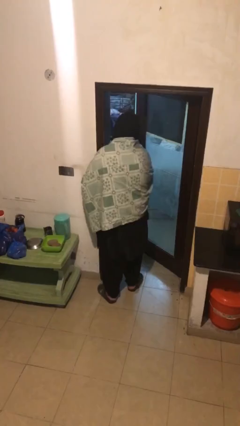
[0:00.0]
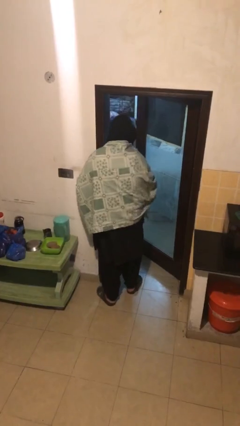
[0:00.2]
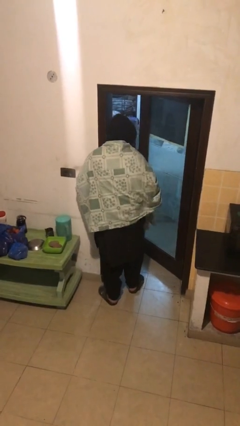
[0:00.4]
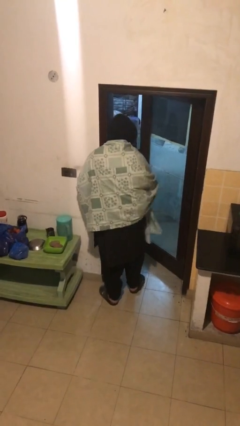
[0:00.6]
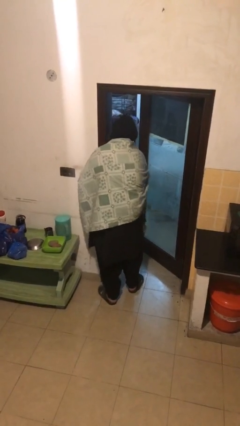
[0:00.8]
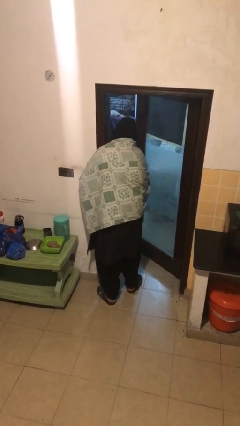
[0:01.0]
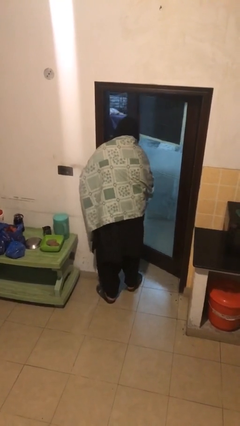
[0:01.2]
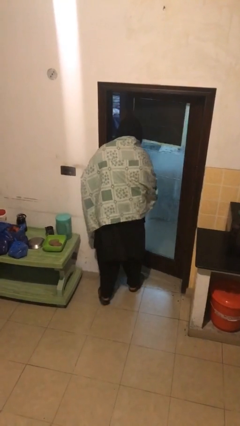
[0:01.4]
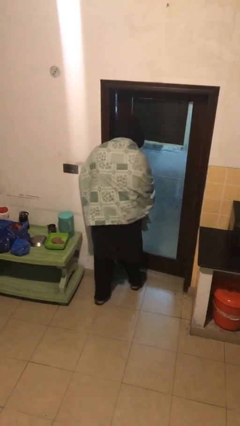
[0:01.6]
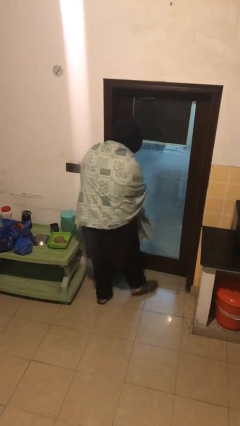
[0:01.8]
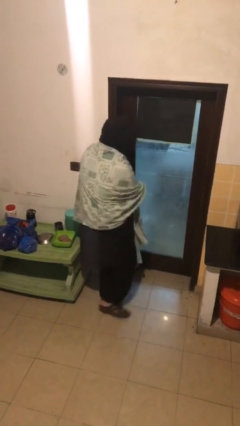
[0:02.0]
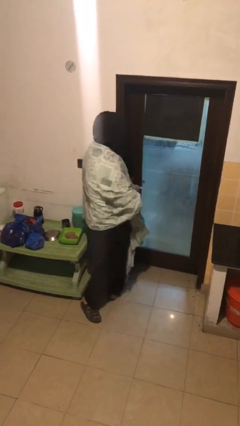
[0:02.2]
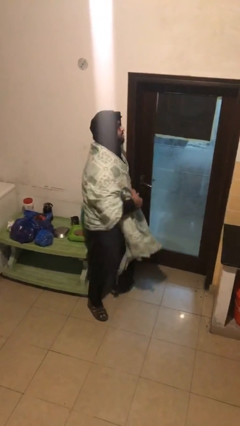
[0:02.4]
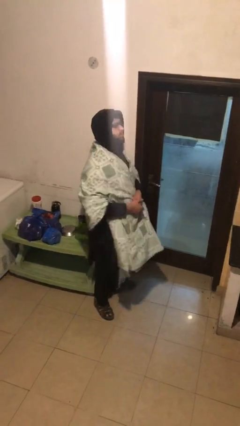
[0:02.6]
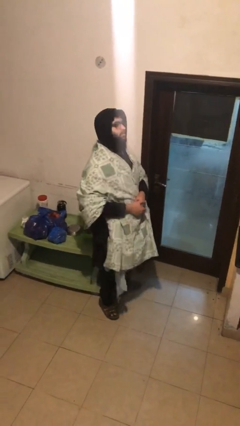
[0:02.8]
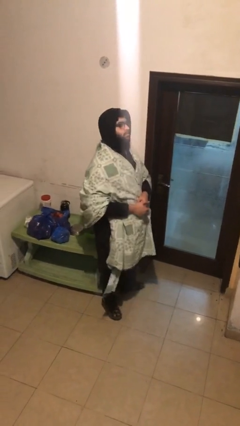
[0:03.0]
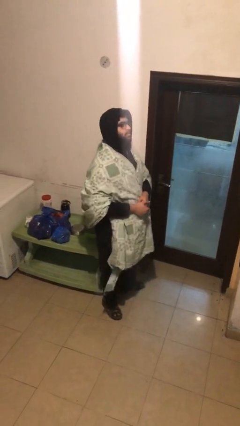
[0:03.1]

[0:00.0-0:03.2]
person closes facility door

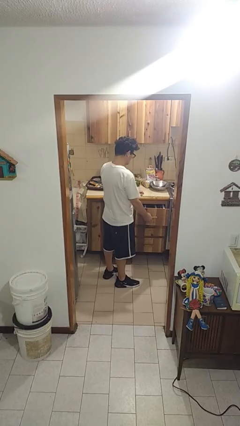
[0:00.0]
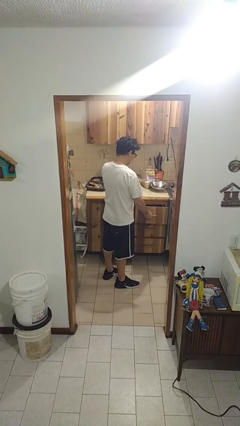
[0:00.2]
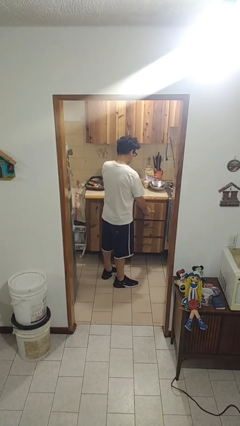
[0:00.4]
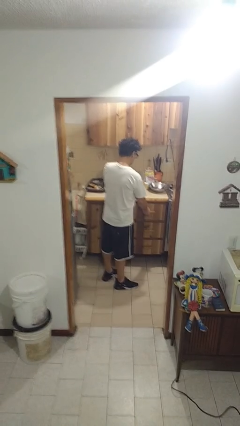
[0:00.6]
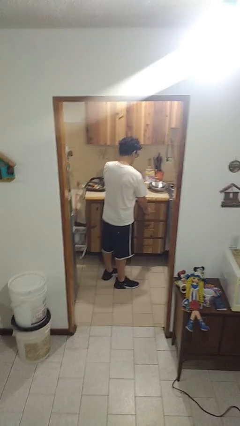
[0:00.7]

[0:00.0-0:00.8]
person closes kitchen drawer

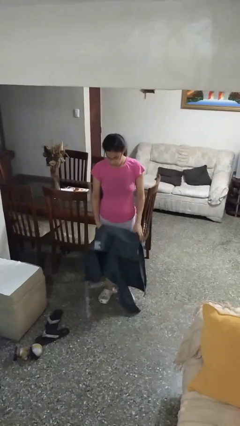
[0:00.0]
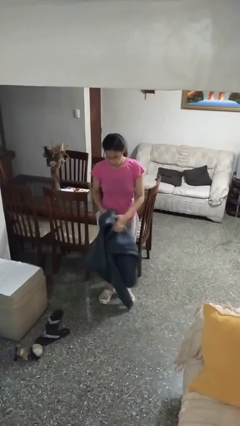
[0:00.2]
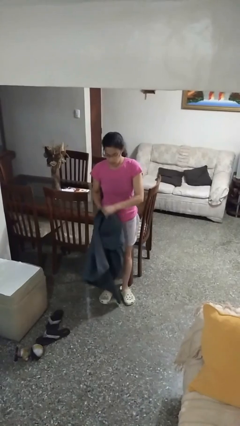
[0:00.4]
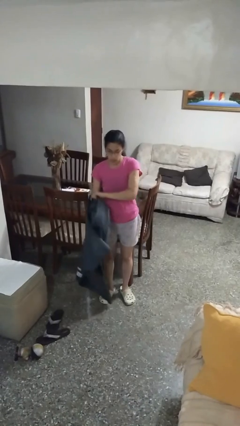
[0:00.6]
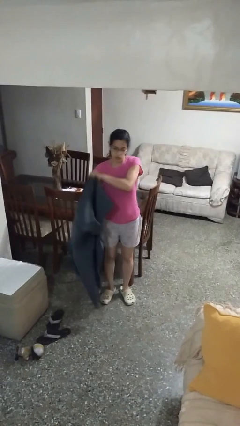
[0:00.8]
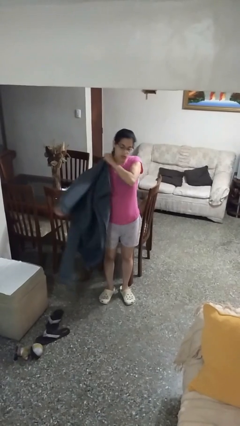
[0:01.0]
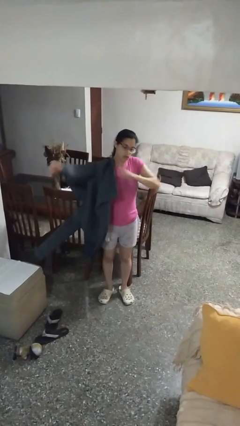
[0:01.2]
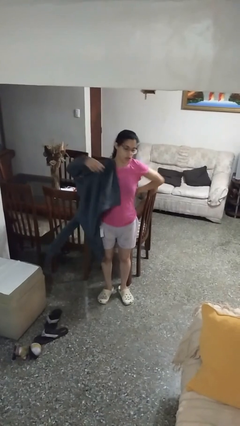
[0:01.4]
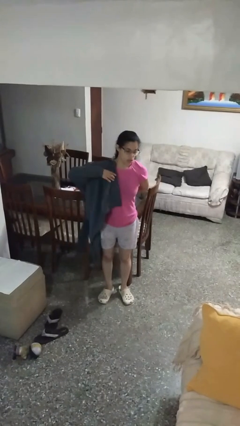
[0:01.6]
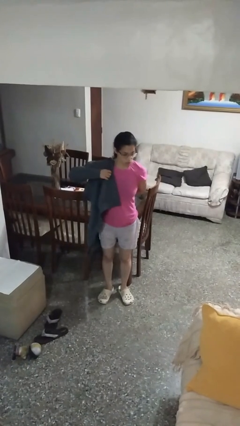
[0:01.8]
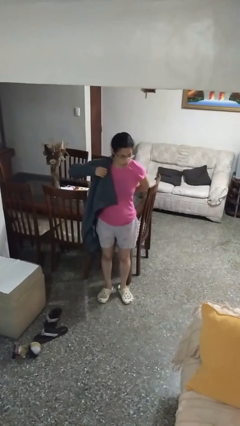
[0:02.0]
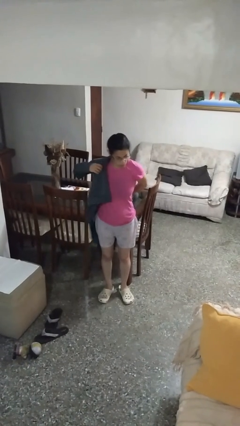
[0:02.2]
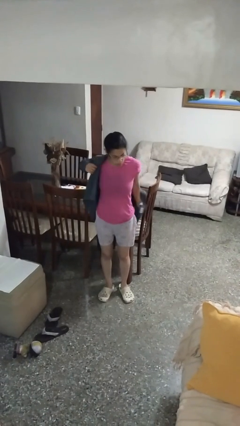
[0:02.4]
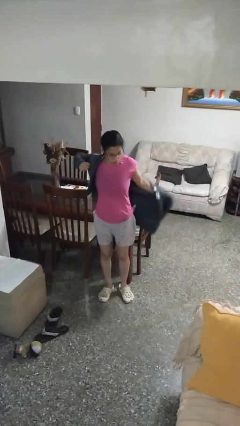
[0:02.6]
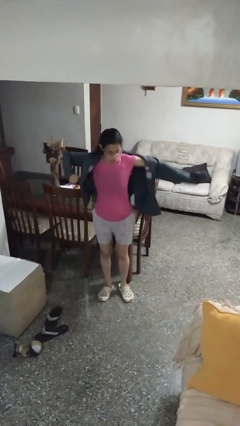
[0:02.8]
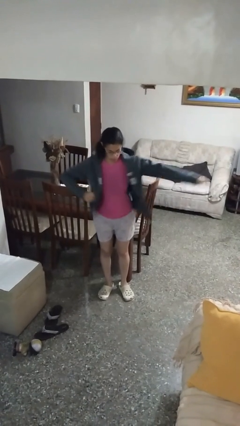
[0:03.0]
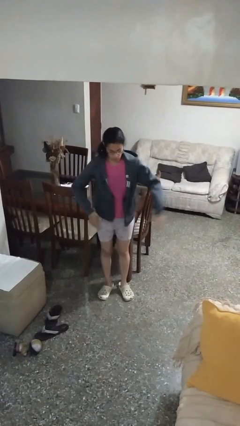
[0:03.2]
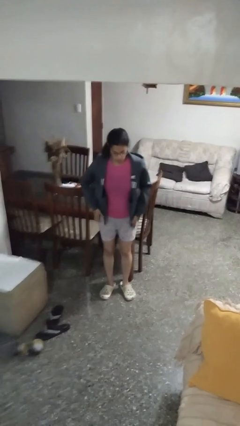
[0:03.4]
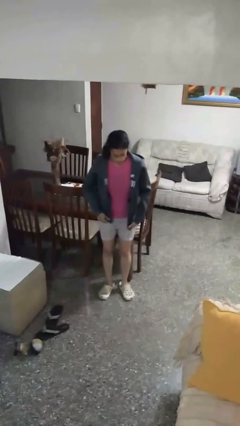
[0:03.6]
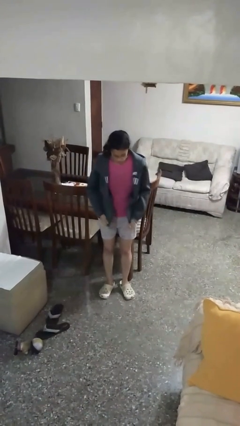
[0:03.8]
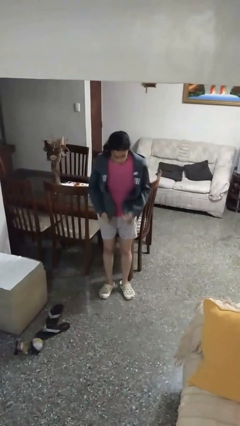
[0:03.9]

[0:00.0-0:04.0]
person puts on jacket

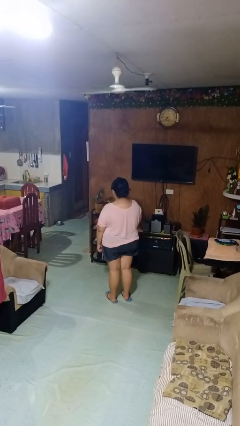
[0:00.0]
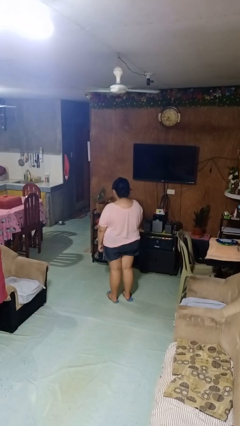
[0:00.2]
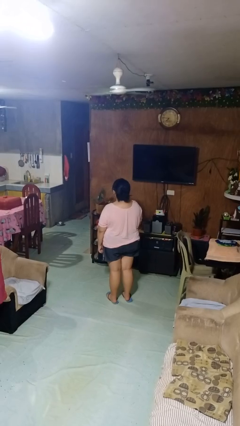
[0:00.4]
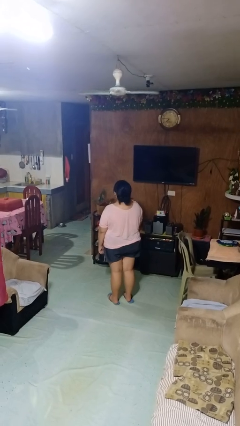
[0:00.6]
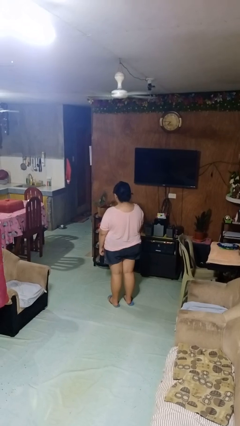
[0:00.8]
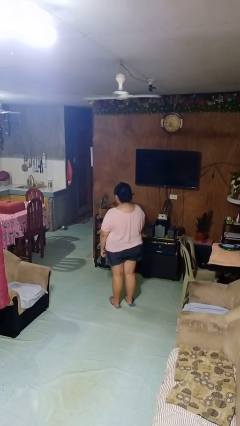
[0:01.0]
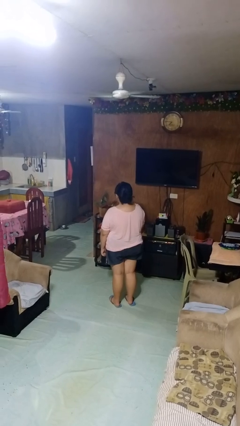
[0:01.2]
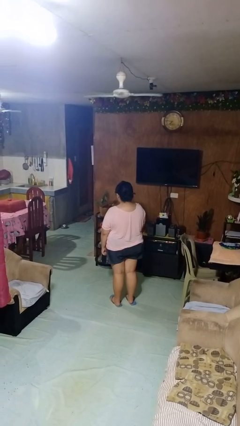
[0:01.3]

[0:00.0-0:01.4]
person nods head

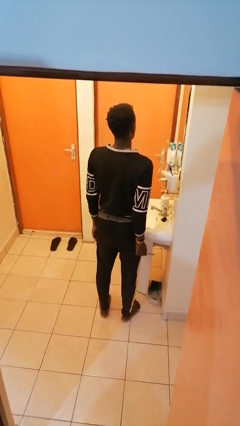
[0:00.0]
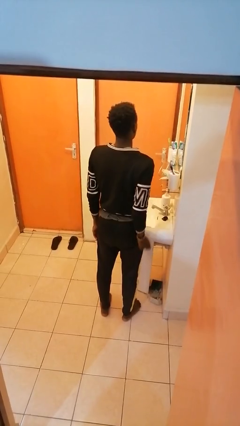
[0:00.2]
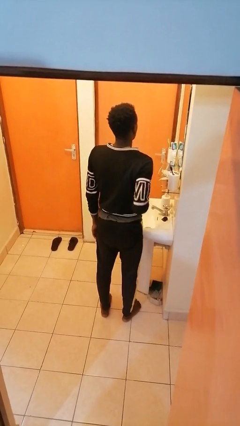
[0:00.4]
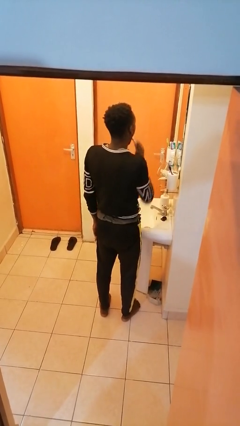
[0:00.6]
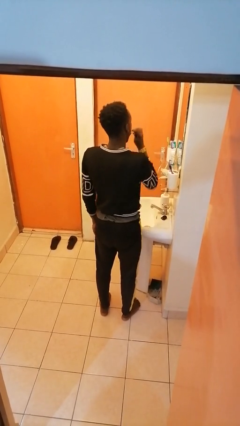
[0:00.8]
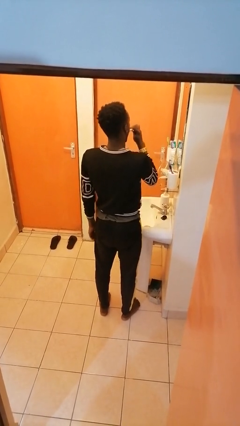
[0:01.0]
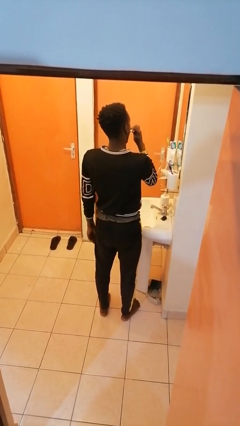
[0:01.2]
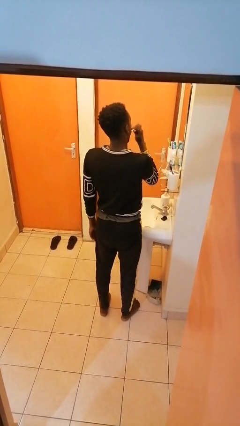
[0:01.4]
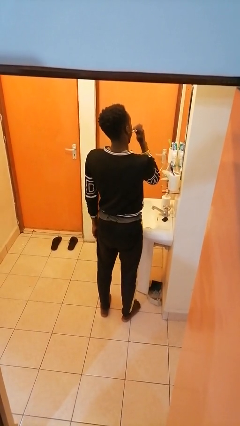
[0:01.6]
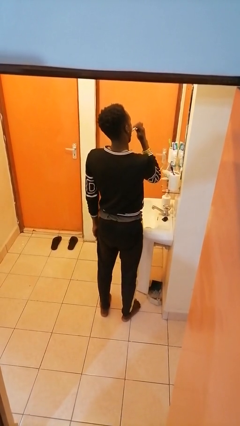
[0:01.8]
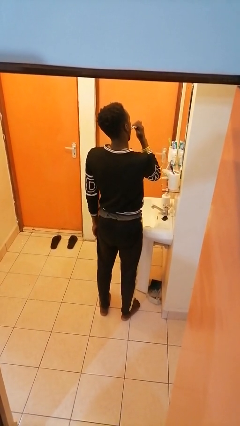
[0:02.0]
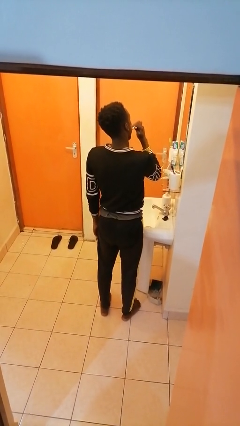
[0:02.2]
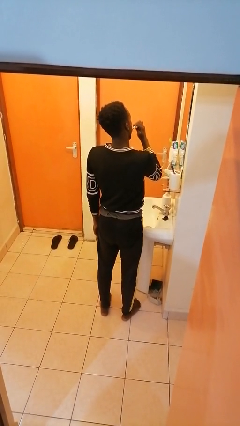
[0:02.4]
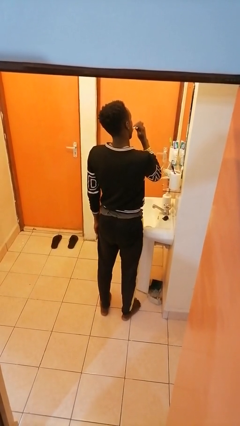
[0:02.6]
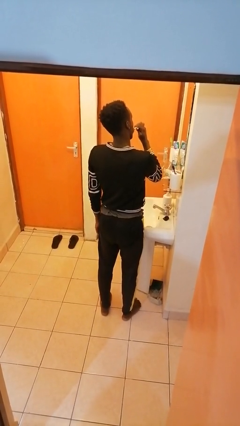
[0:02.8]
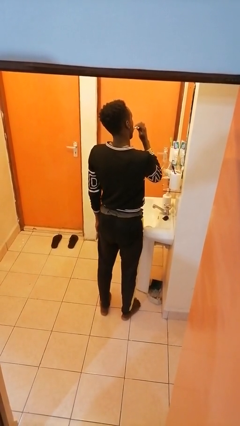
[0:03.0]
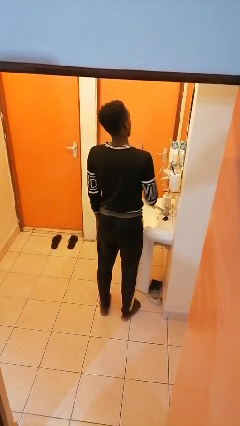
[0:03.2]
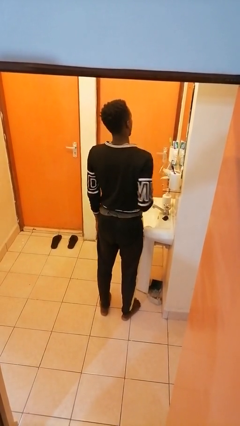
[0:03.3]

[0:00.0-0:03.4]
person brushes teeth

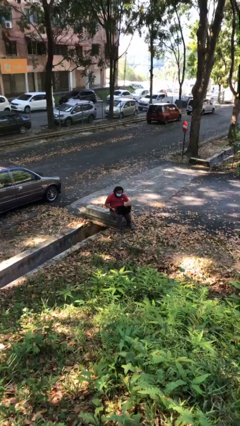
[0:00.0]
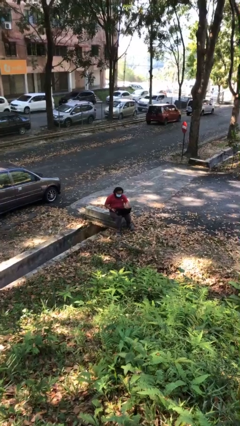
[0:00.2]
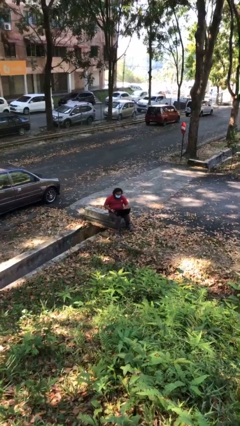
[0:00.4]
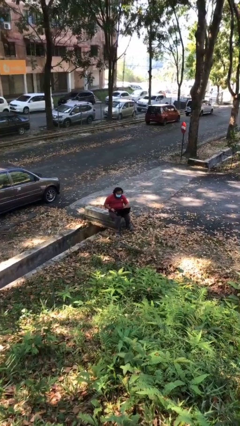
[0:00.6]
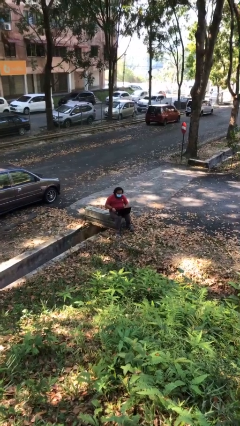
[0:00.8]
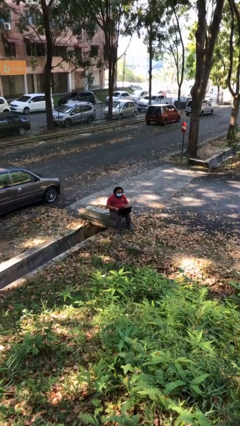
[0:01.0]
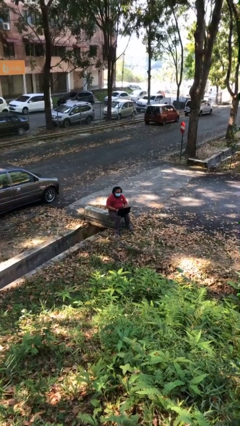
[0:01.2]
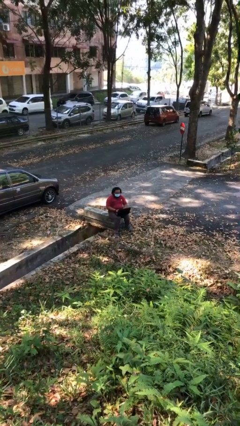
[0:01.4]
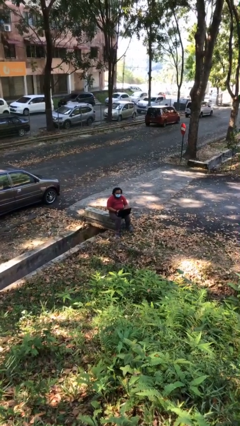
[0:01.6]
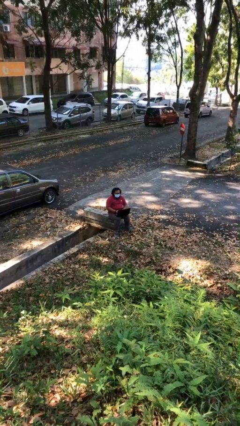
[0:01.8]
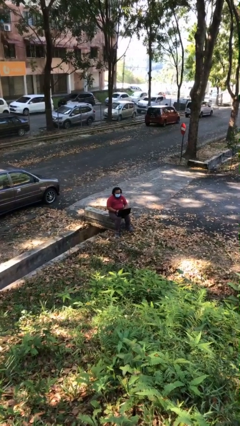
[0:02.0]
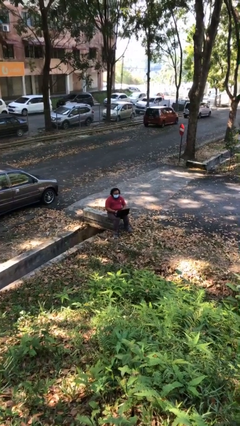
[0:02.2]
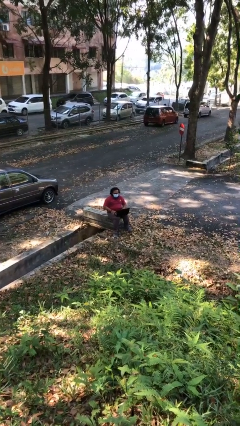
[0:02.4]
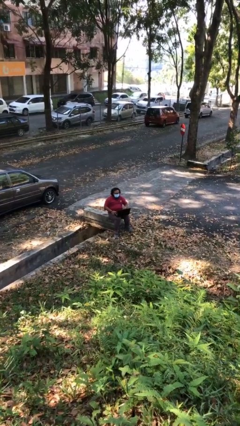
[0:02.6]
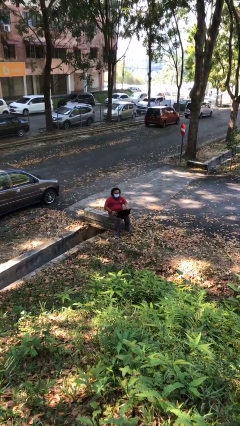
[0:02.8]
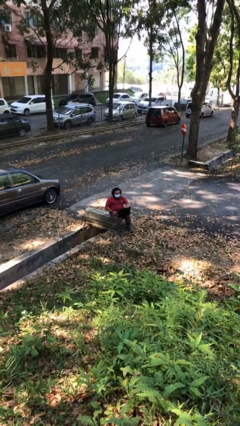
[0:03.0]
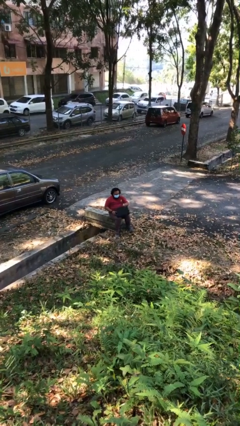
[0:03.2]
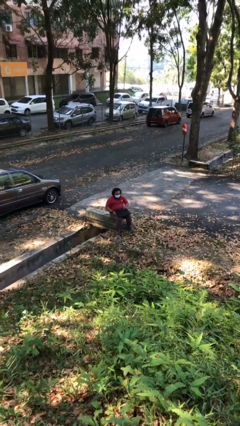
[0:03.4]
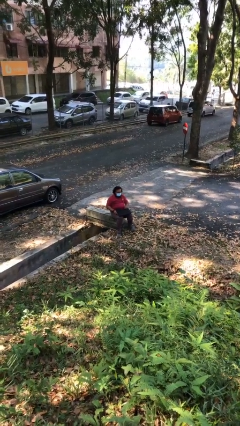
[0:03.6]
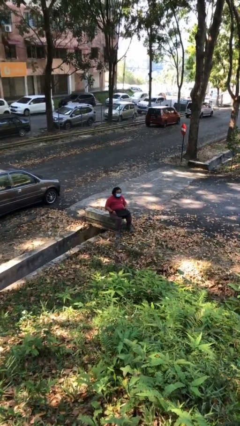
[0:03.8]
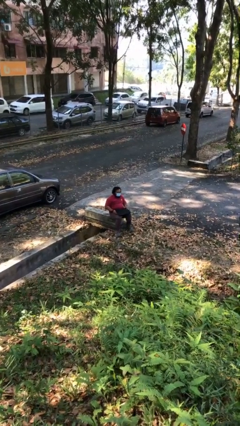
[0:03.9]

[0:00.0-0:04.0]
person interacts with laptop

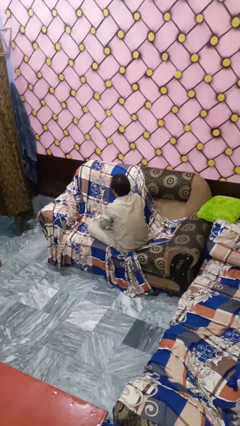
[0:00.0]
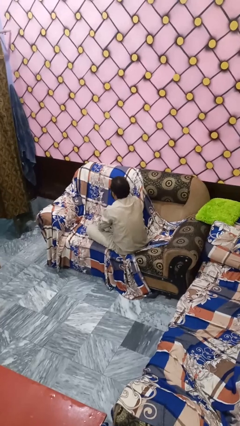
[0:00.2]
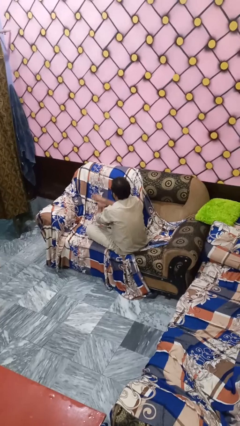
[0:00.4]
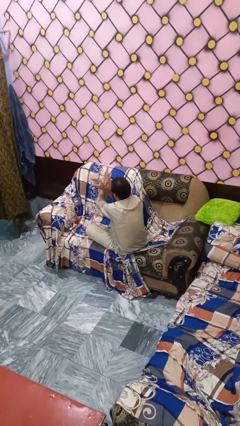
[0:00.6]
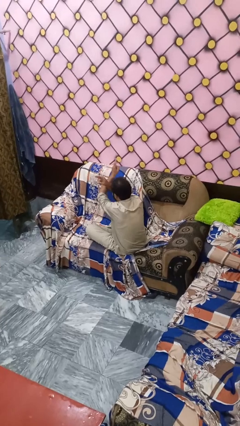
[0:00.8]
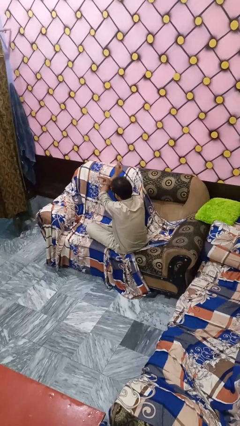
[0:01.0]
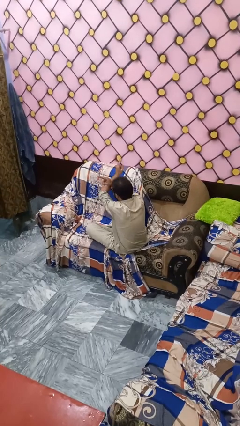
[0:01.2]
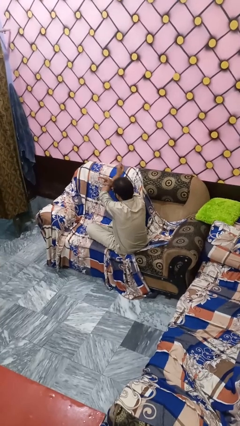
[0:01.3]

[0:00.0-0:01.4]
person gestures cut
